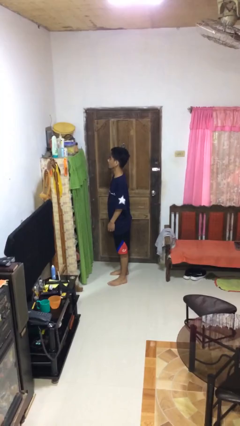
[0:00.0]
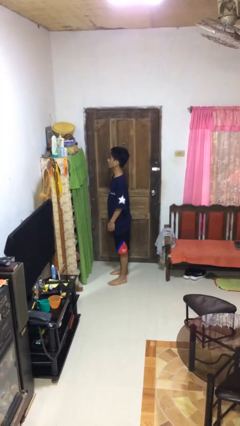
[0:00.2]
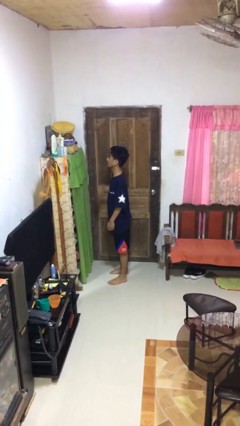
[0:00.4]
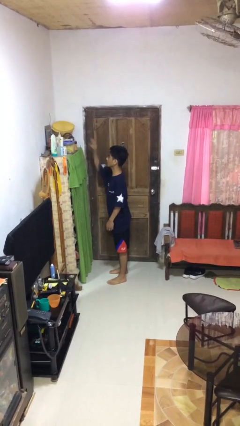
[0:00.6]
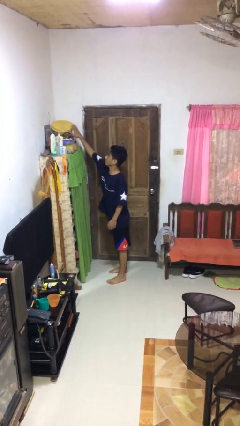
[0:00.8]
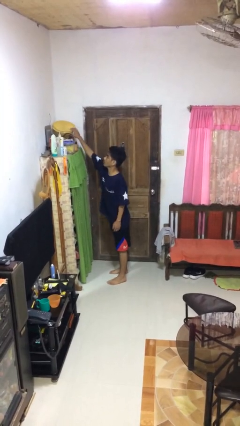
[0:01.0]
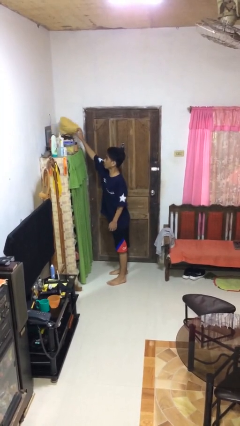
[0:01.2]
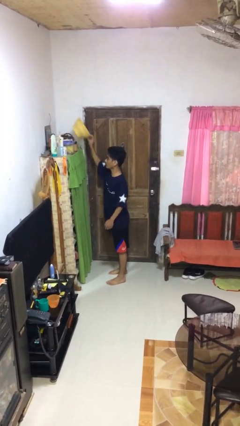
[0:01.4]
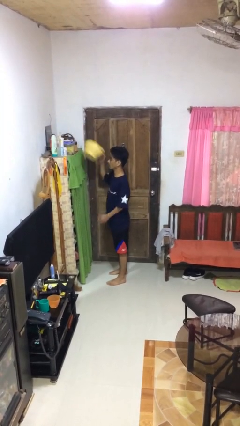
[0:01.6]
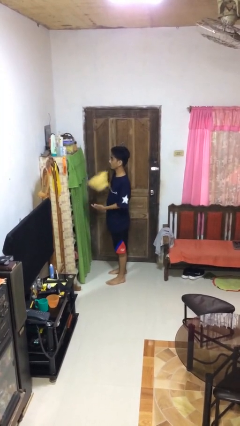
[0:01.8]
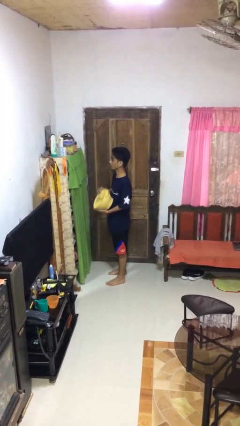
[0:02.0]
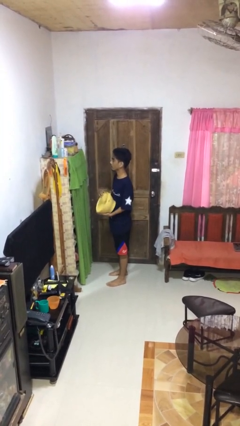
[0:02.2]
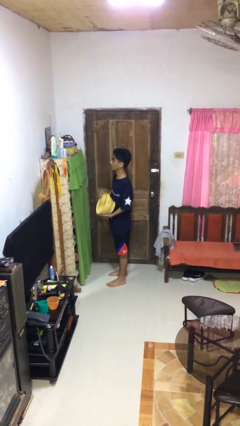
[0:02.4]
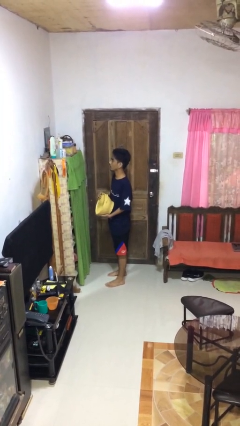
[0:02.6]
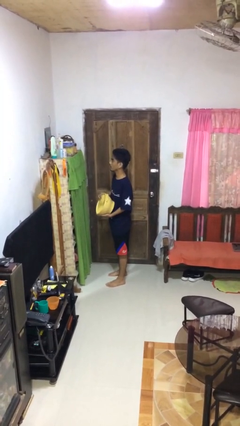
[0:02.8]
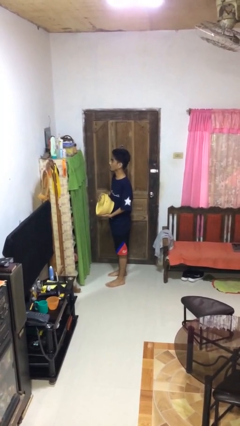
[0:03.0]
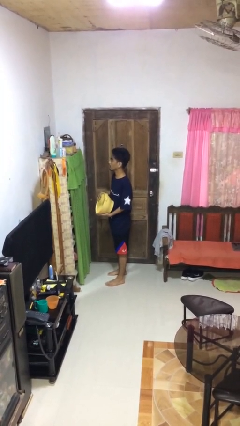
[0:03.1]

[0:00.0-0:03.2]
person picks up object from shelf

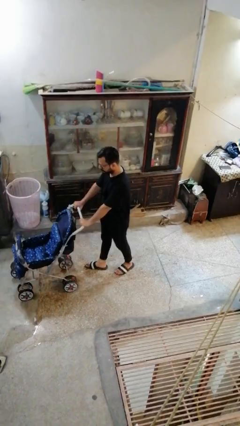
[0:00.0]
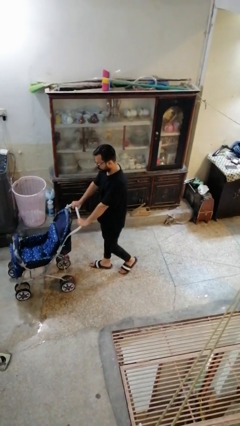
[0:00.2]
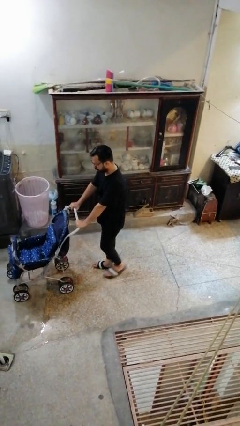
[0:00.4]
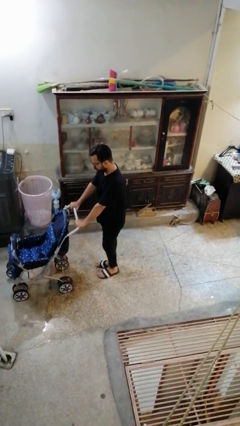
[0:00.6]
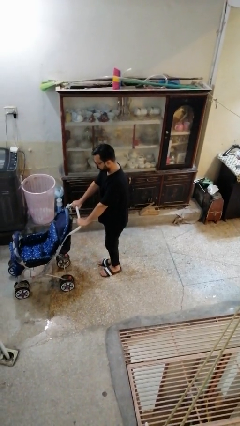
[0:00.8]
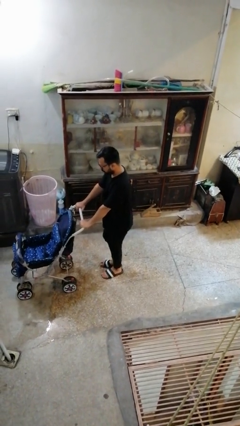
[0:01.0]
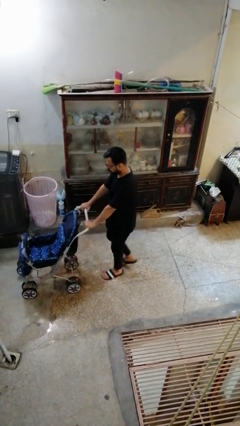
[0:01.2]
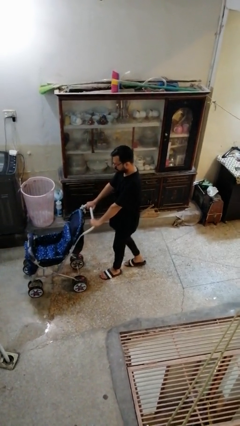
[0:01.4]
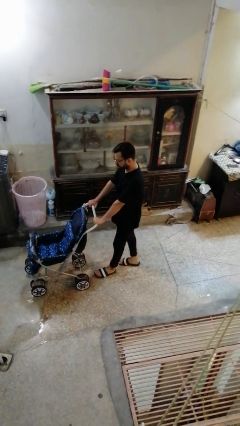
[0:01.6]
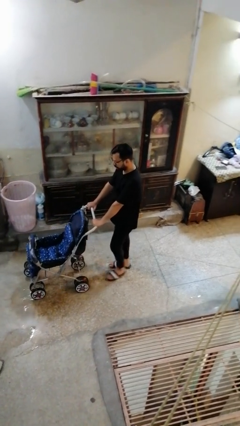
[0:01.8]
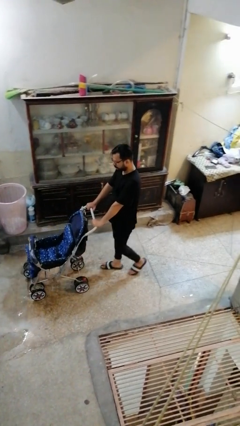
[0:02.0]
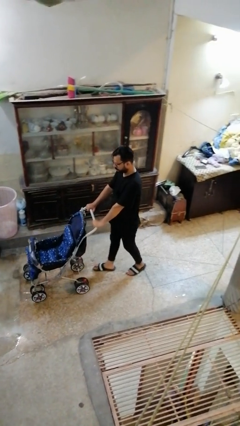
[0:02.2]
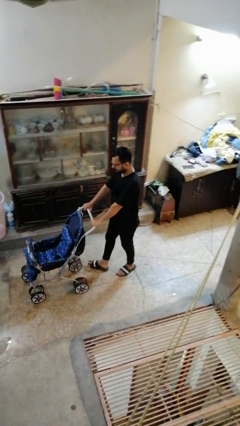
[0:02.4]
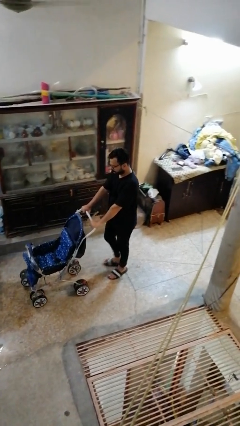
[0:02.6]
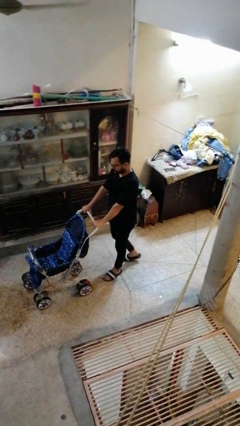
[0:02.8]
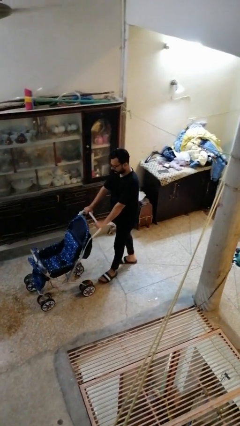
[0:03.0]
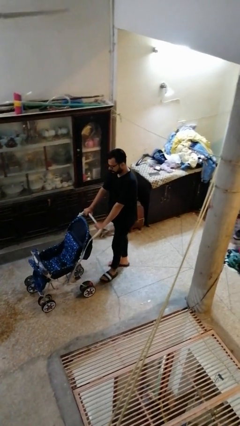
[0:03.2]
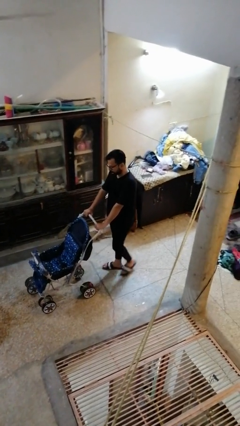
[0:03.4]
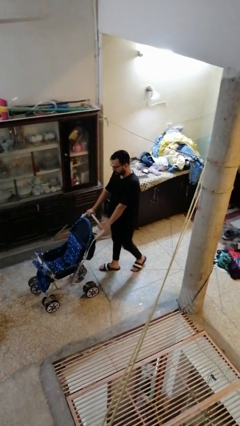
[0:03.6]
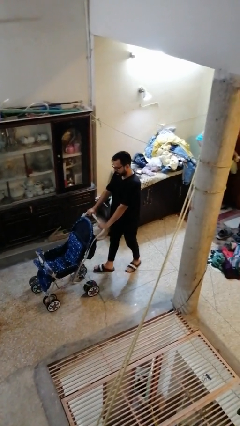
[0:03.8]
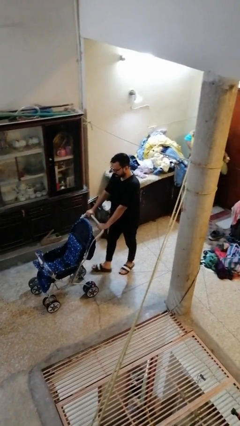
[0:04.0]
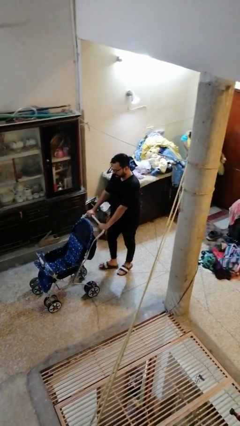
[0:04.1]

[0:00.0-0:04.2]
person pulls wheeled cart

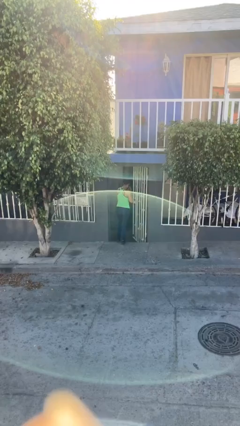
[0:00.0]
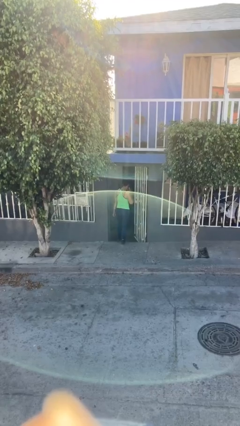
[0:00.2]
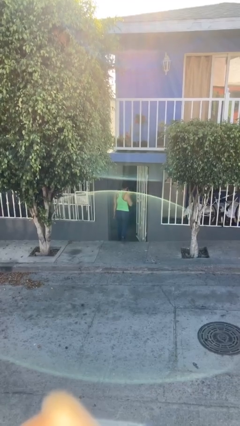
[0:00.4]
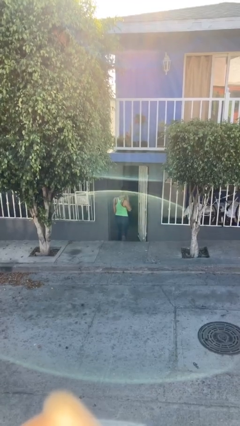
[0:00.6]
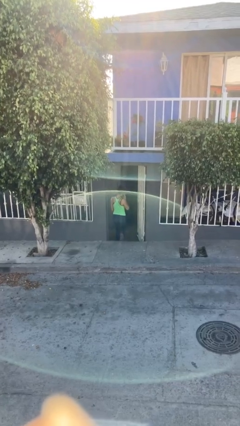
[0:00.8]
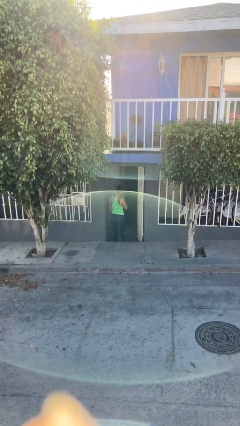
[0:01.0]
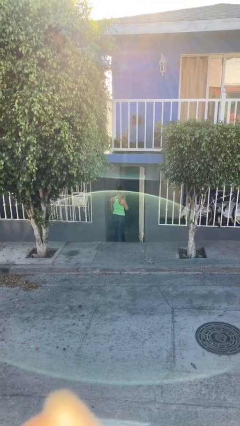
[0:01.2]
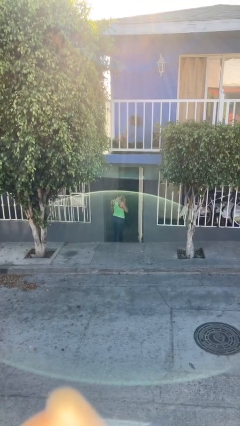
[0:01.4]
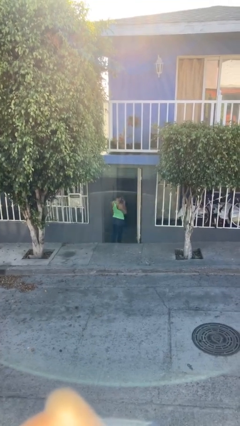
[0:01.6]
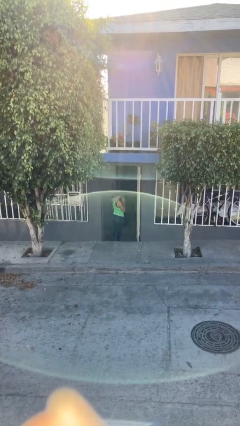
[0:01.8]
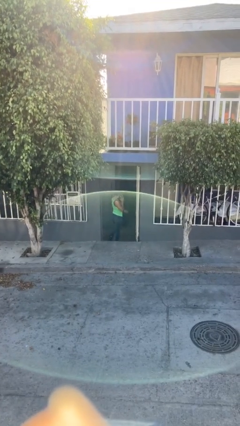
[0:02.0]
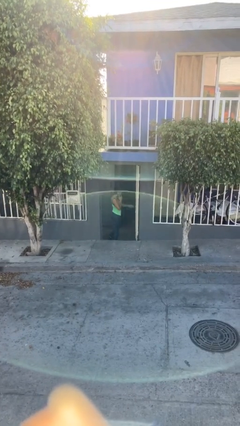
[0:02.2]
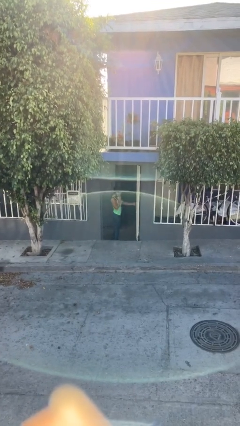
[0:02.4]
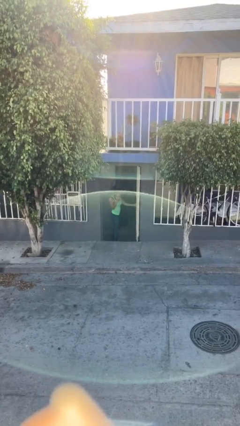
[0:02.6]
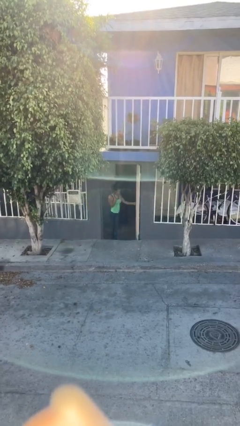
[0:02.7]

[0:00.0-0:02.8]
person exits scene through structure

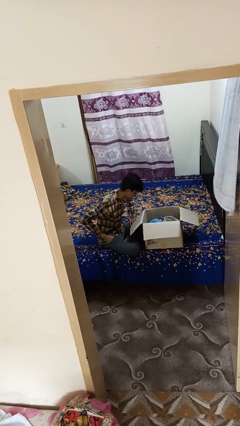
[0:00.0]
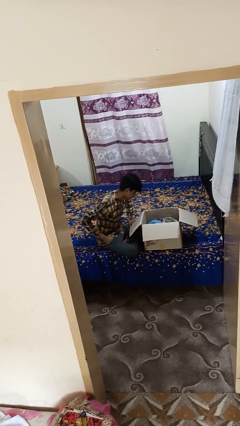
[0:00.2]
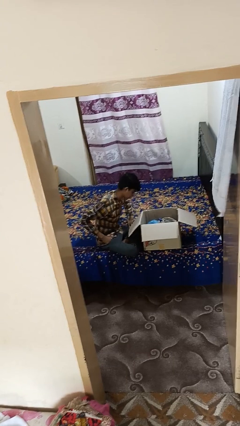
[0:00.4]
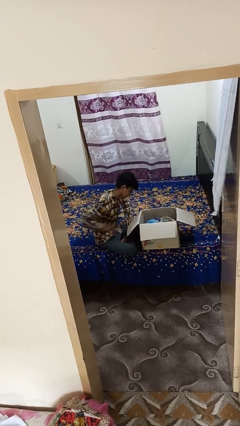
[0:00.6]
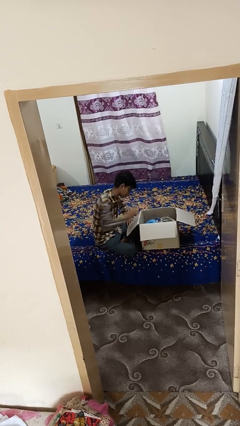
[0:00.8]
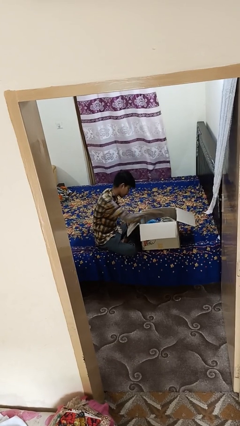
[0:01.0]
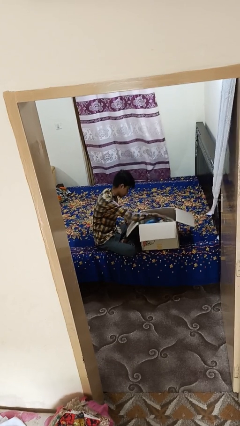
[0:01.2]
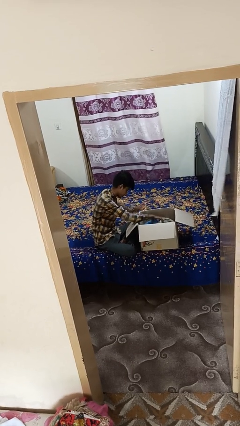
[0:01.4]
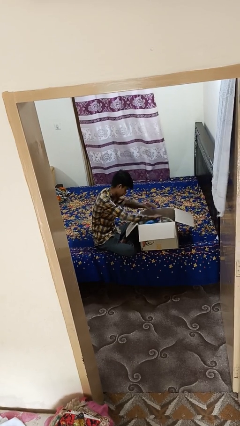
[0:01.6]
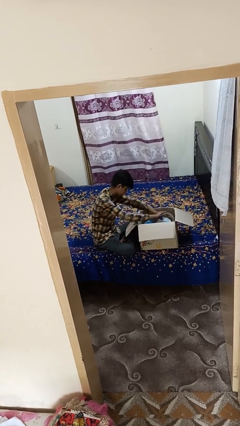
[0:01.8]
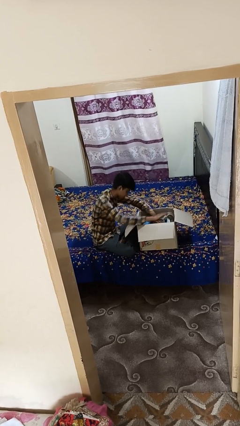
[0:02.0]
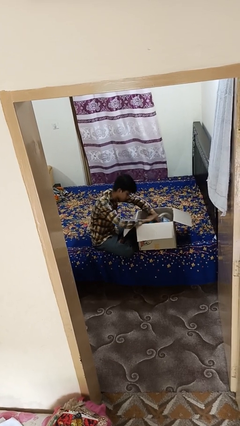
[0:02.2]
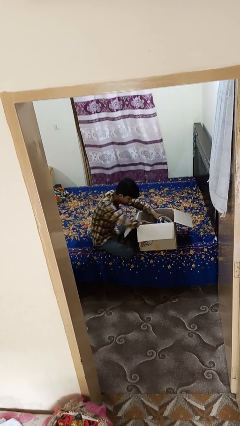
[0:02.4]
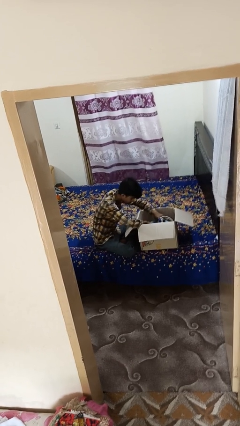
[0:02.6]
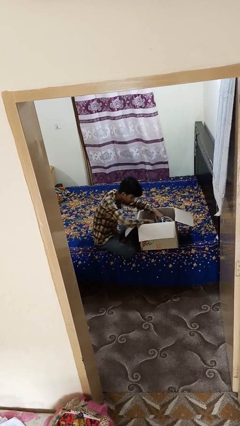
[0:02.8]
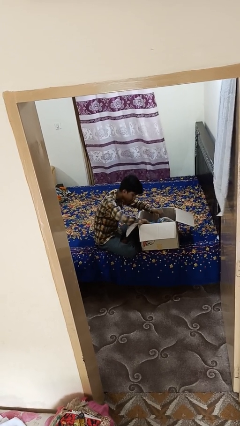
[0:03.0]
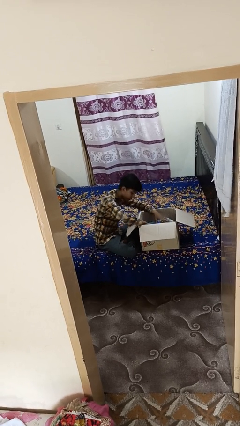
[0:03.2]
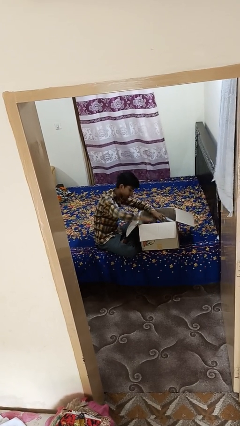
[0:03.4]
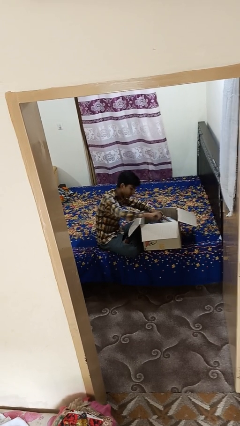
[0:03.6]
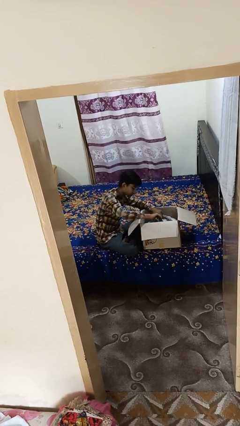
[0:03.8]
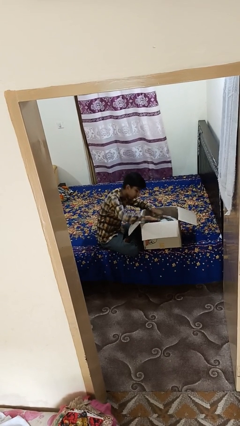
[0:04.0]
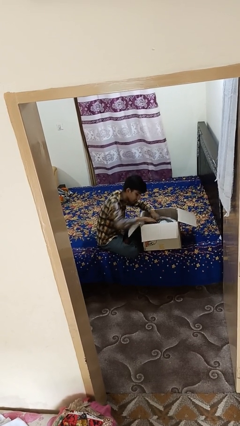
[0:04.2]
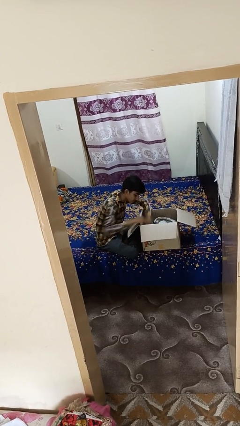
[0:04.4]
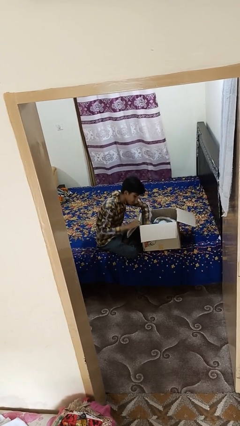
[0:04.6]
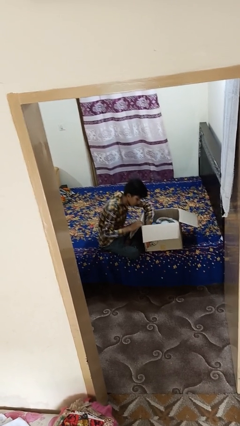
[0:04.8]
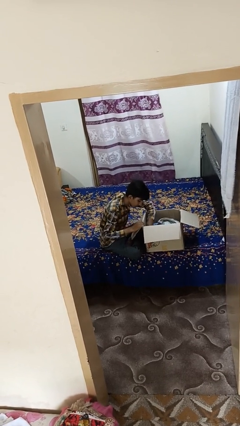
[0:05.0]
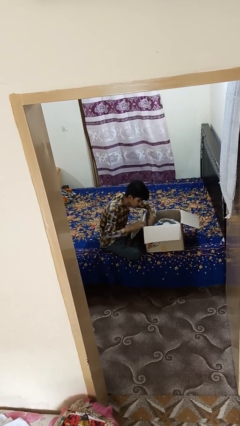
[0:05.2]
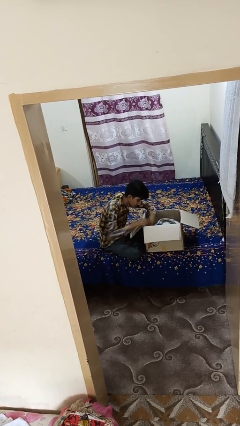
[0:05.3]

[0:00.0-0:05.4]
person searches in box

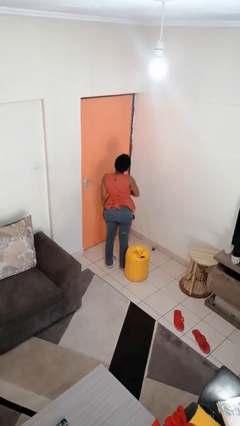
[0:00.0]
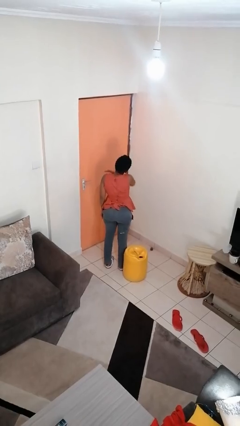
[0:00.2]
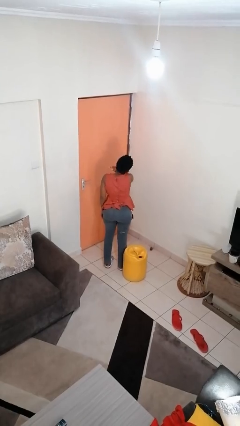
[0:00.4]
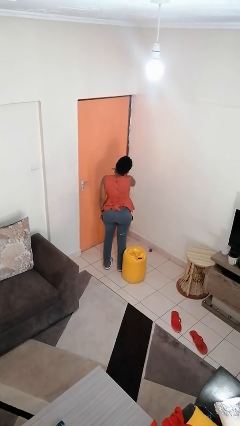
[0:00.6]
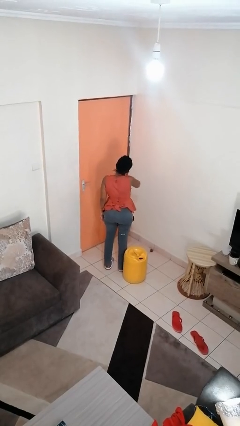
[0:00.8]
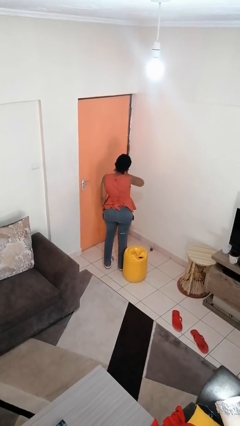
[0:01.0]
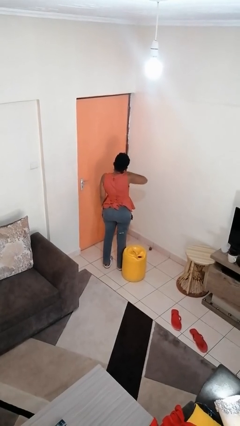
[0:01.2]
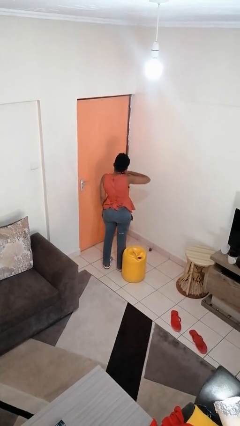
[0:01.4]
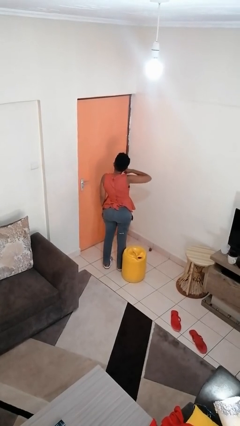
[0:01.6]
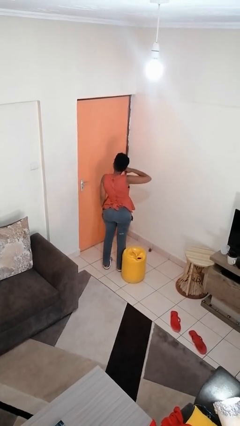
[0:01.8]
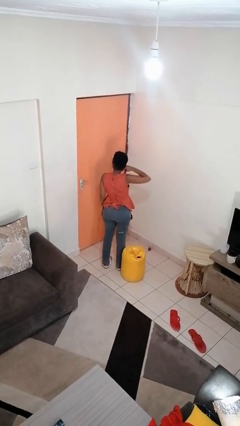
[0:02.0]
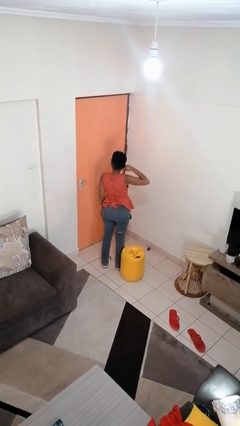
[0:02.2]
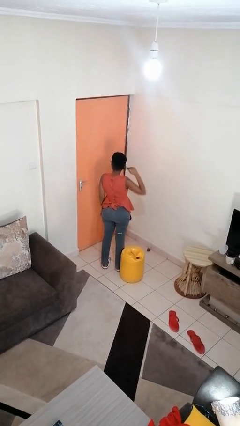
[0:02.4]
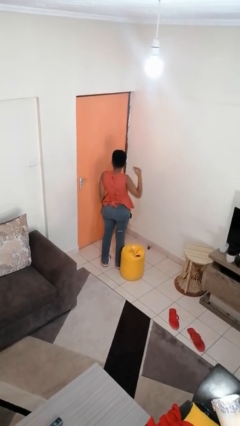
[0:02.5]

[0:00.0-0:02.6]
person gestures cut
